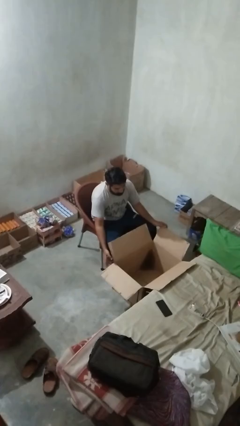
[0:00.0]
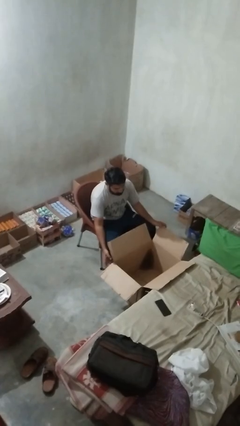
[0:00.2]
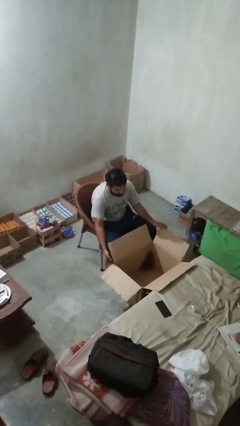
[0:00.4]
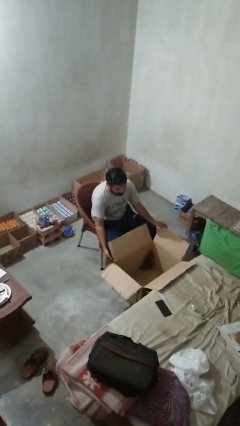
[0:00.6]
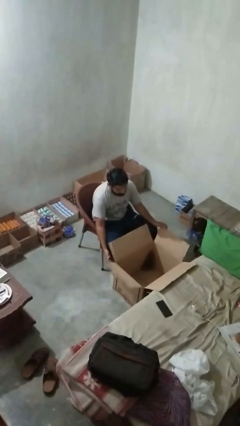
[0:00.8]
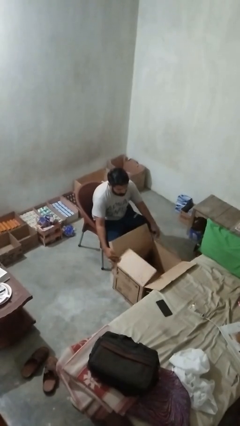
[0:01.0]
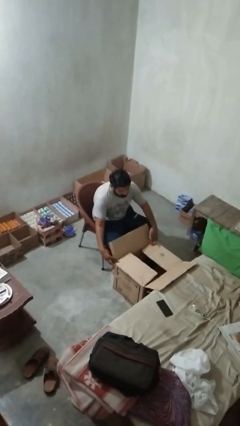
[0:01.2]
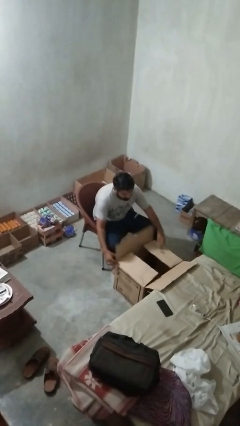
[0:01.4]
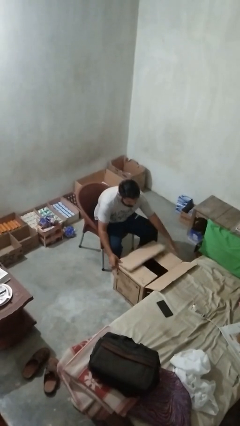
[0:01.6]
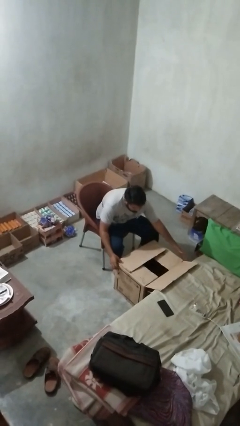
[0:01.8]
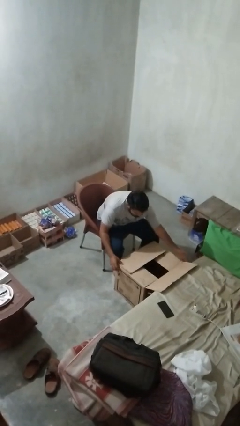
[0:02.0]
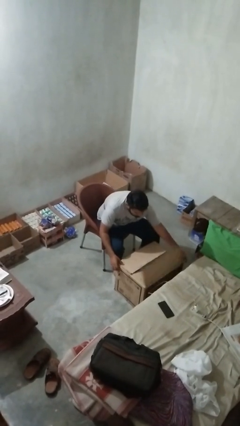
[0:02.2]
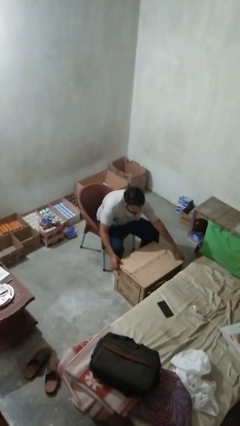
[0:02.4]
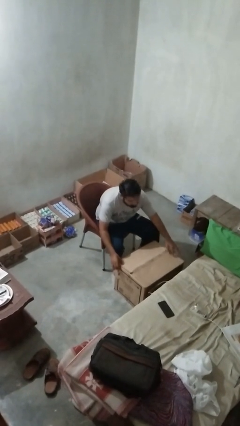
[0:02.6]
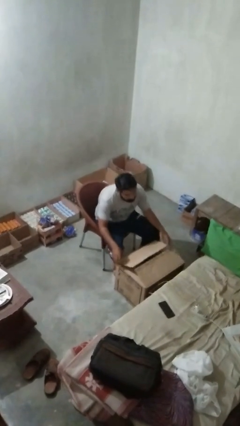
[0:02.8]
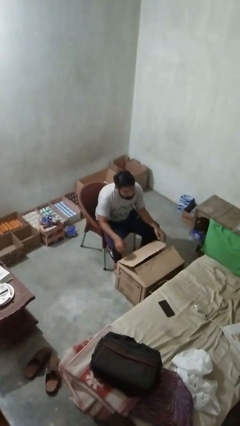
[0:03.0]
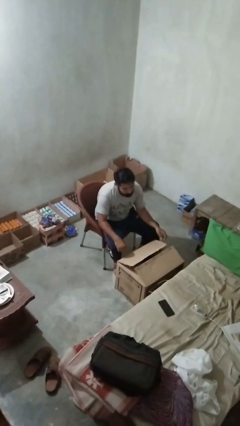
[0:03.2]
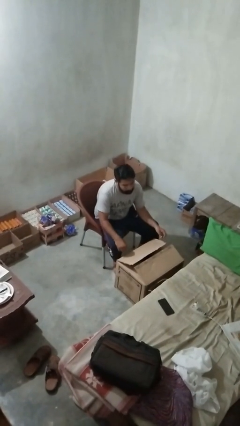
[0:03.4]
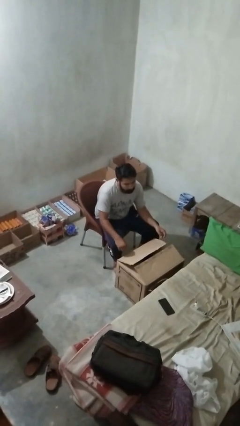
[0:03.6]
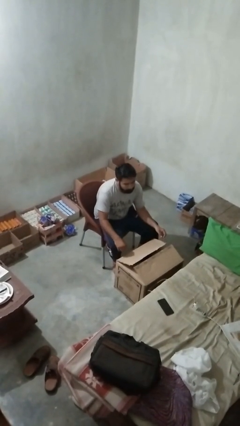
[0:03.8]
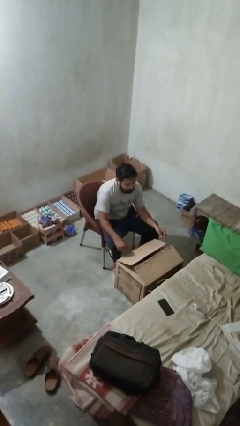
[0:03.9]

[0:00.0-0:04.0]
person closes box

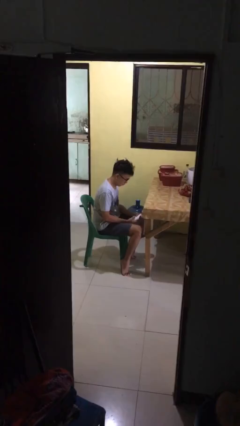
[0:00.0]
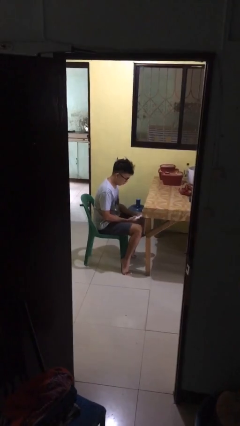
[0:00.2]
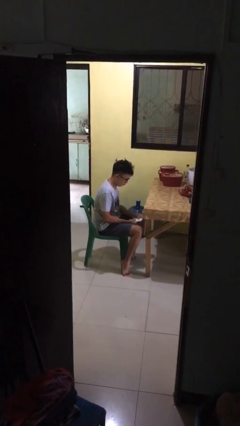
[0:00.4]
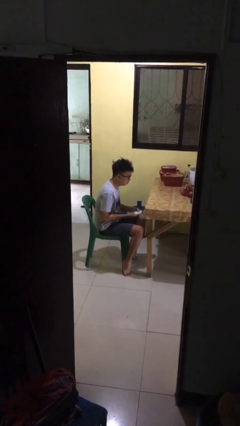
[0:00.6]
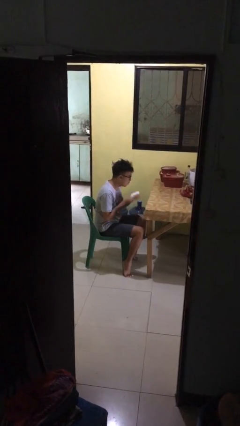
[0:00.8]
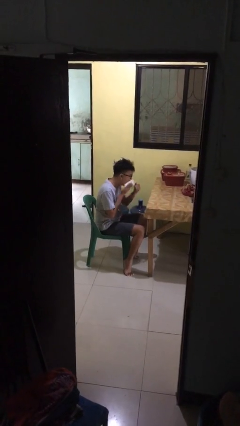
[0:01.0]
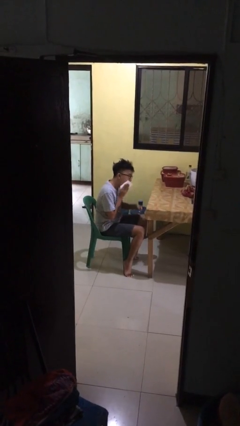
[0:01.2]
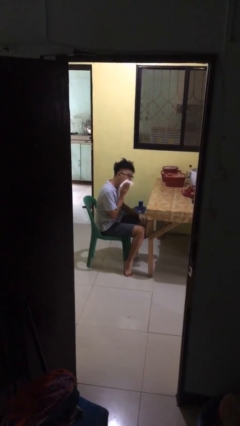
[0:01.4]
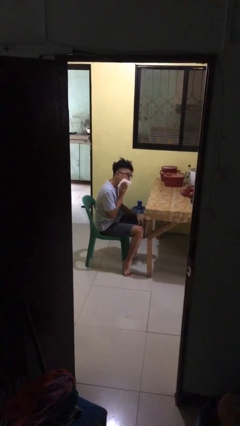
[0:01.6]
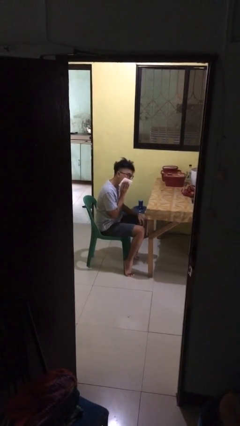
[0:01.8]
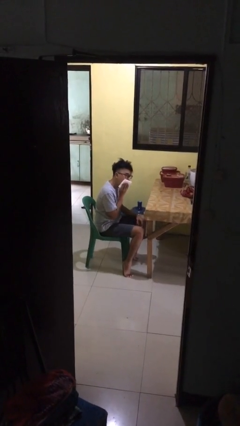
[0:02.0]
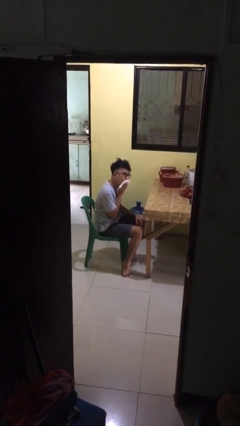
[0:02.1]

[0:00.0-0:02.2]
person wipes mouth with napkin

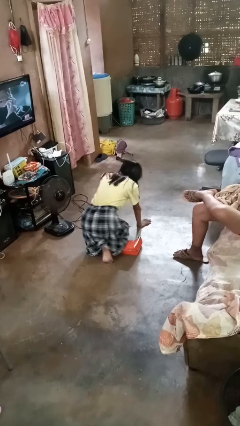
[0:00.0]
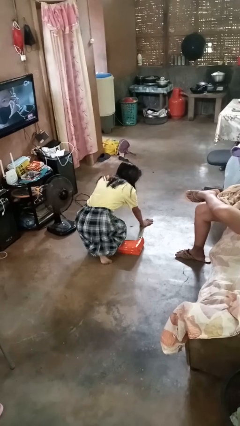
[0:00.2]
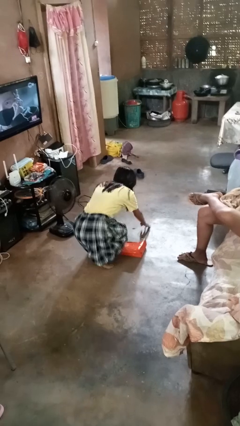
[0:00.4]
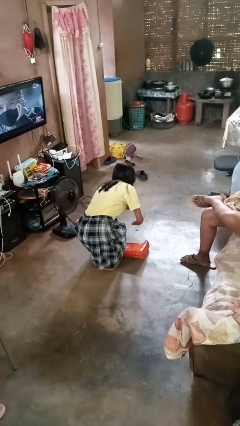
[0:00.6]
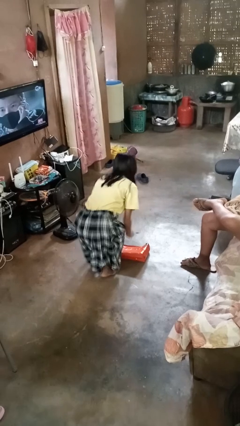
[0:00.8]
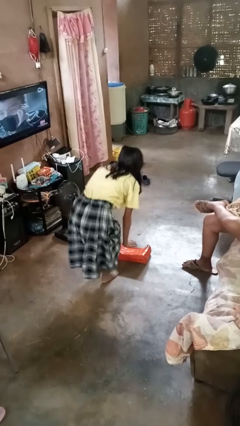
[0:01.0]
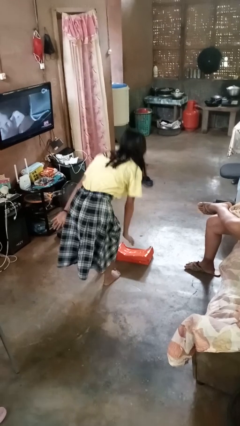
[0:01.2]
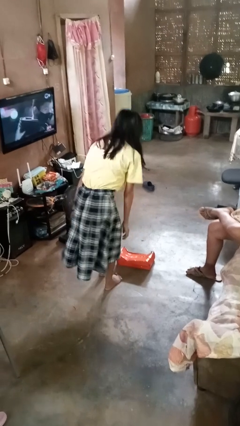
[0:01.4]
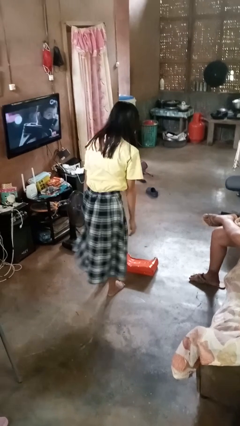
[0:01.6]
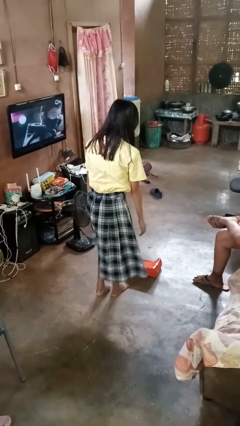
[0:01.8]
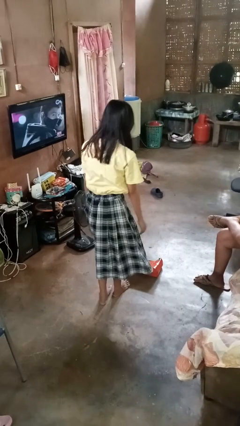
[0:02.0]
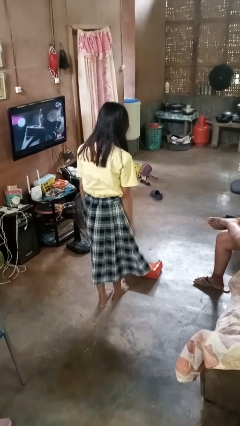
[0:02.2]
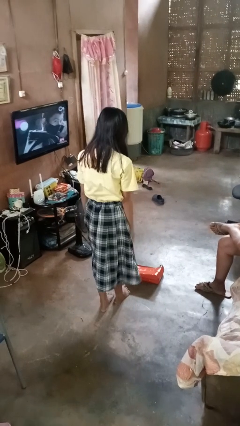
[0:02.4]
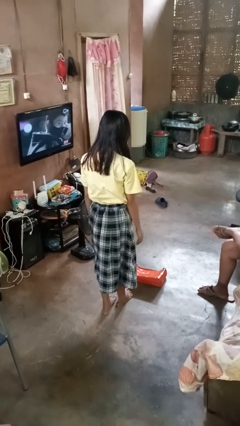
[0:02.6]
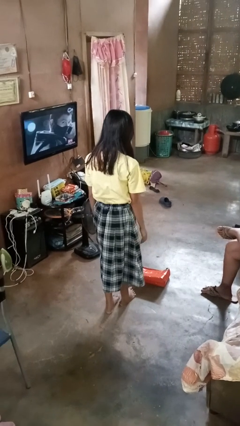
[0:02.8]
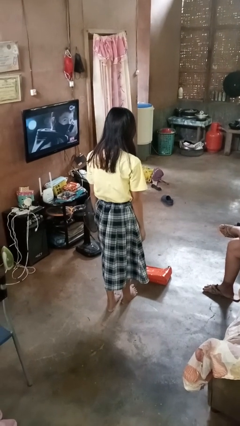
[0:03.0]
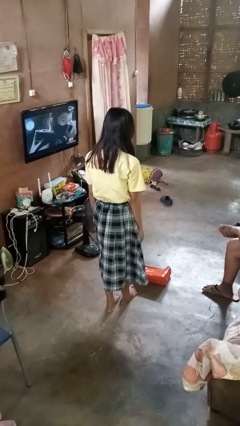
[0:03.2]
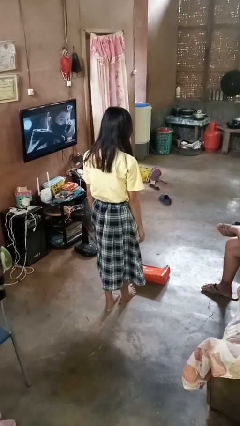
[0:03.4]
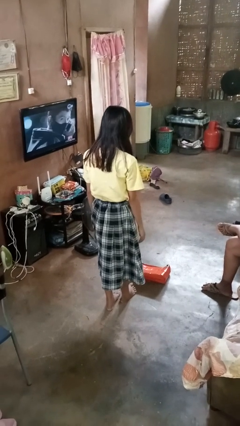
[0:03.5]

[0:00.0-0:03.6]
person stands up from floor

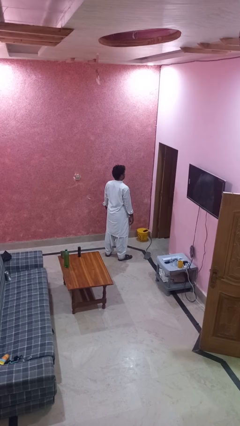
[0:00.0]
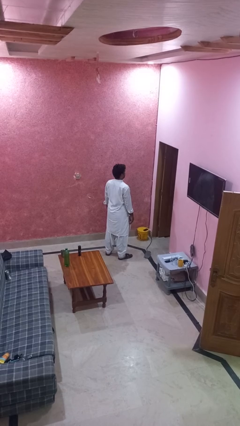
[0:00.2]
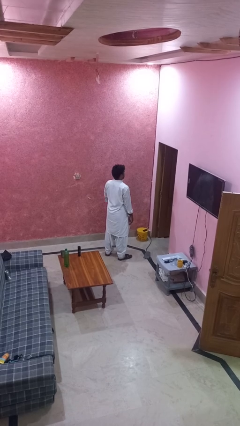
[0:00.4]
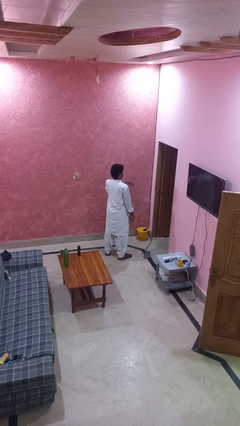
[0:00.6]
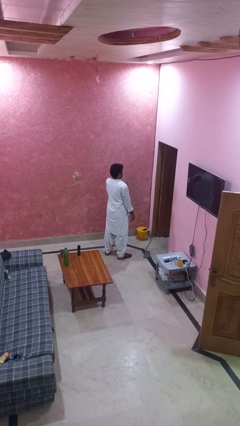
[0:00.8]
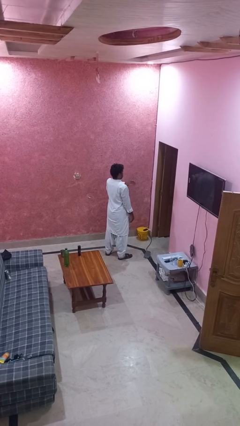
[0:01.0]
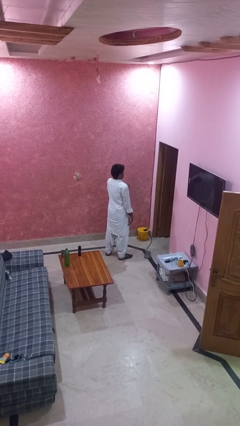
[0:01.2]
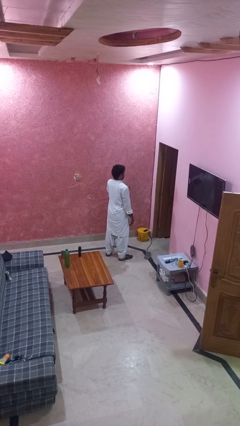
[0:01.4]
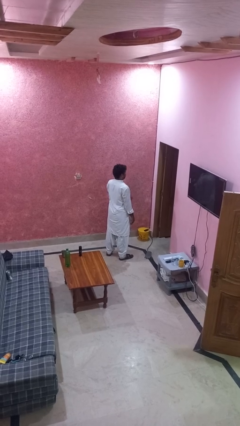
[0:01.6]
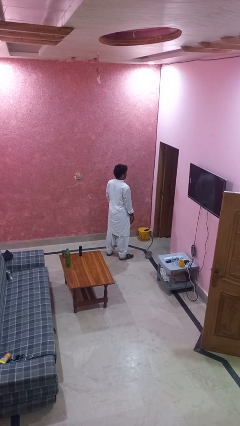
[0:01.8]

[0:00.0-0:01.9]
person drums on chest

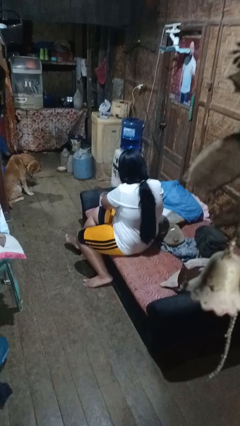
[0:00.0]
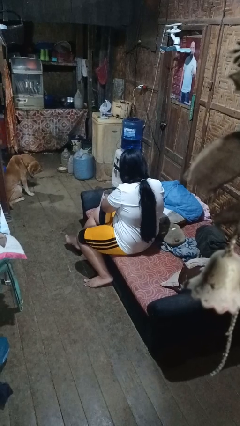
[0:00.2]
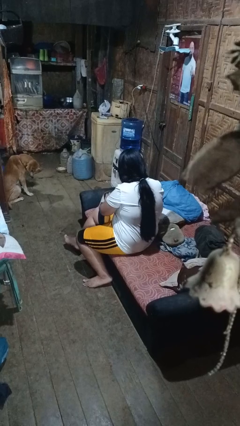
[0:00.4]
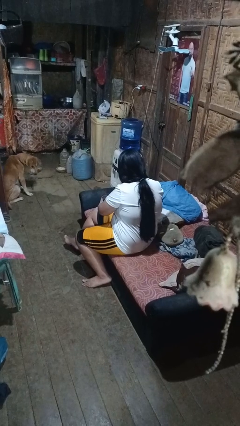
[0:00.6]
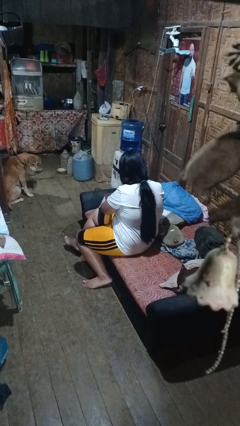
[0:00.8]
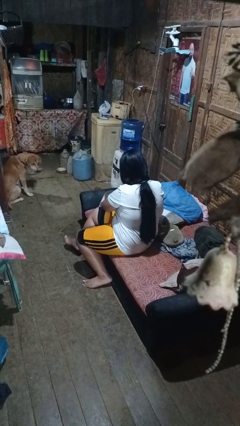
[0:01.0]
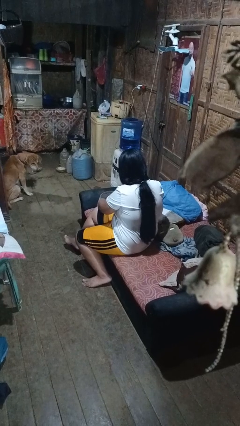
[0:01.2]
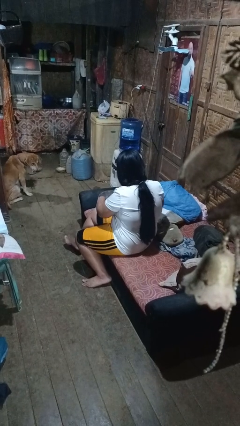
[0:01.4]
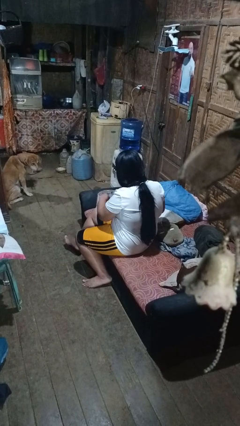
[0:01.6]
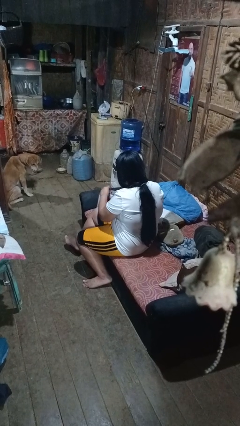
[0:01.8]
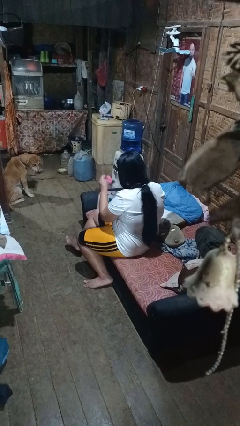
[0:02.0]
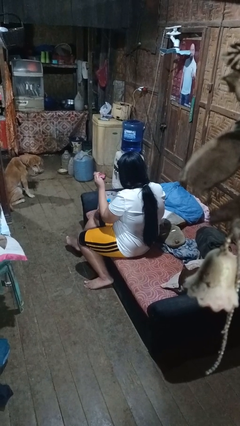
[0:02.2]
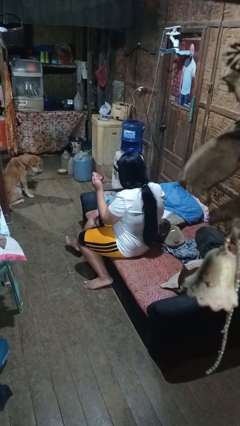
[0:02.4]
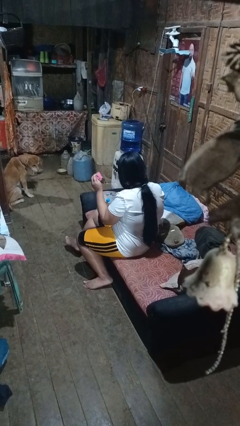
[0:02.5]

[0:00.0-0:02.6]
person searches in bag

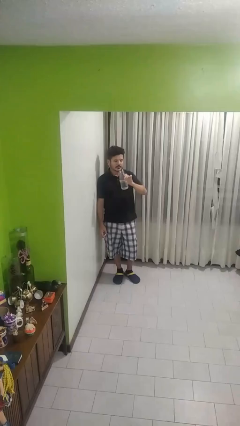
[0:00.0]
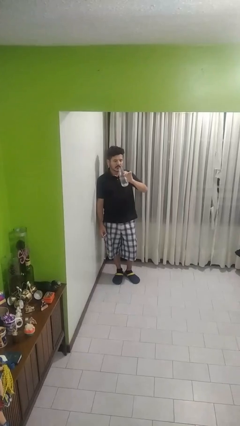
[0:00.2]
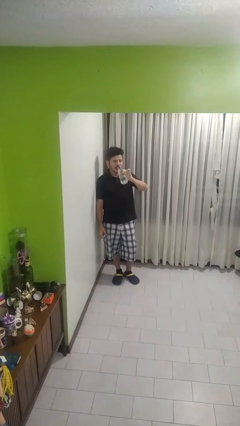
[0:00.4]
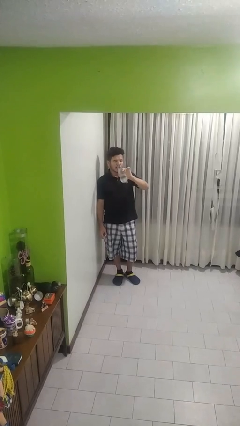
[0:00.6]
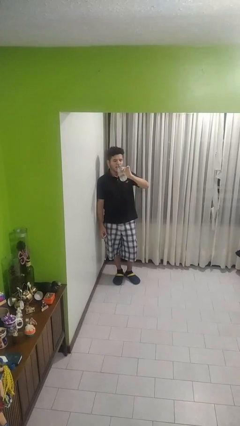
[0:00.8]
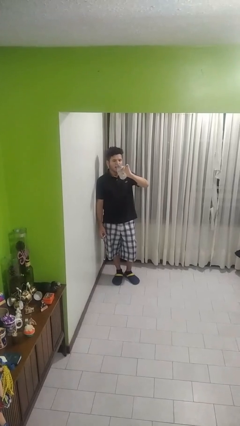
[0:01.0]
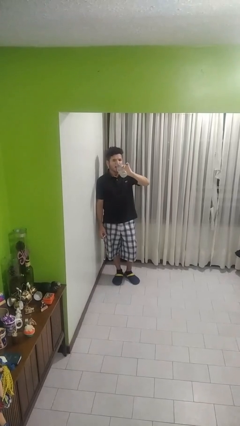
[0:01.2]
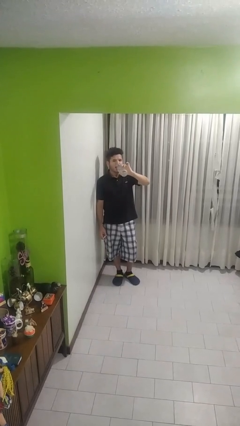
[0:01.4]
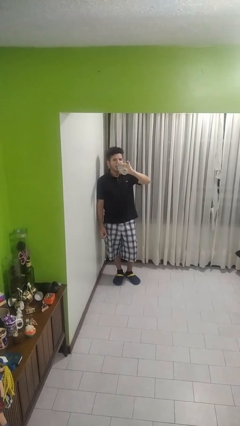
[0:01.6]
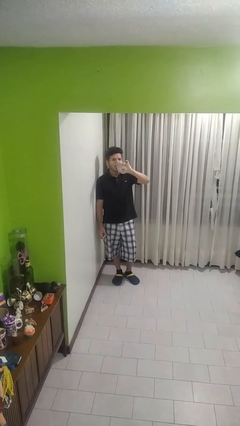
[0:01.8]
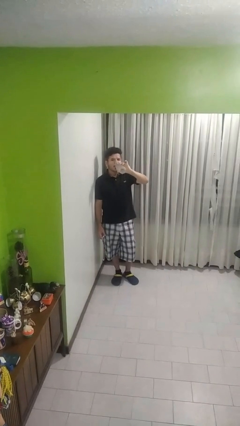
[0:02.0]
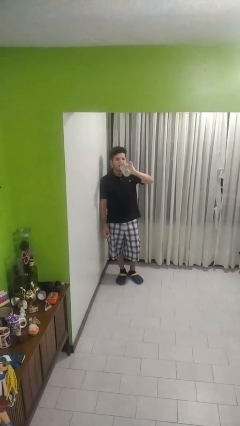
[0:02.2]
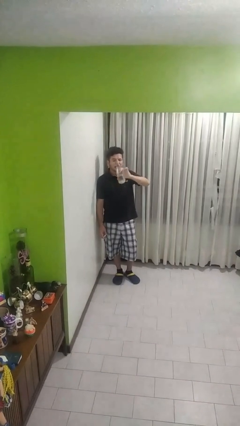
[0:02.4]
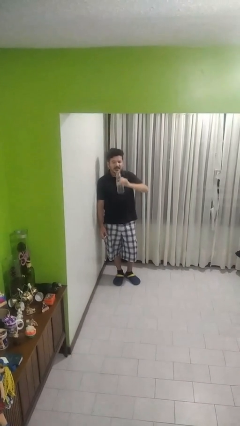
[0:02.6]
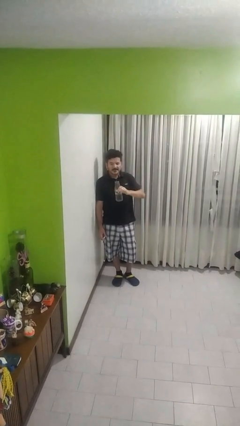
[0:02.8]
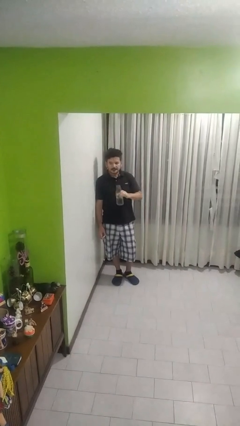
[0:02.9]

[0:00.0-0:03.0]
person drinks from bottle

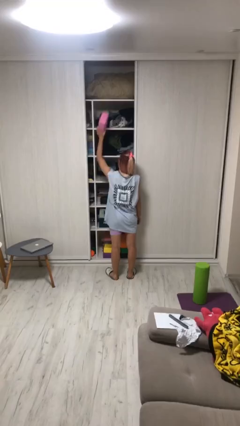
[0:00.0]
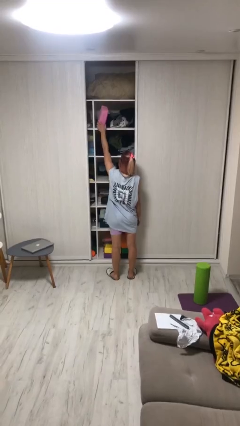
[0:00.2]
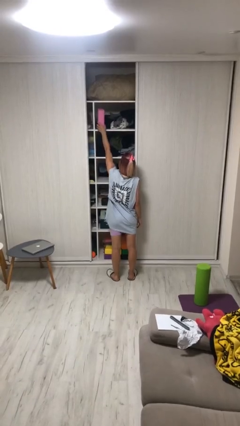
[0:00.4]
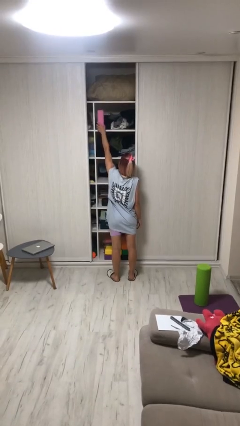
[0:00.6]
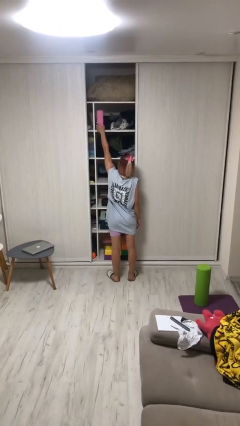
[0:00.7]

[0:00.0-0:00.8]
person puts down object on shelf
